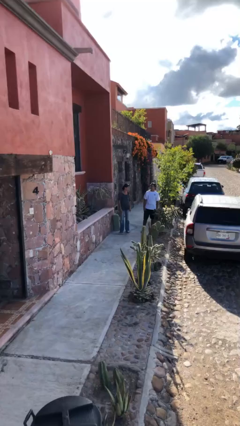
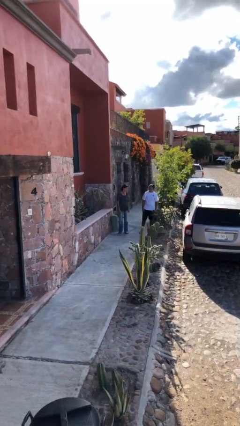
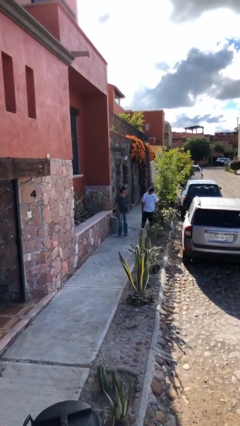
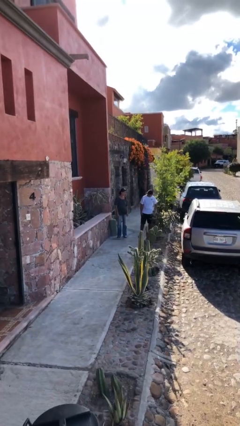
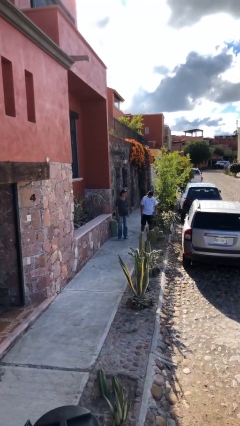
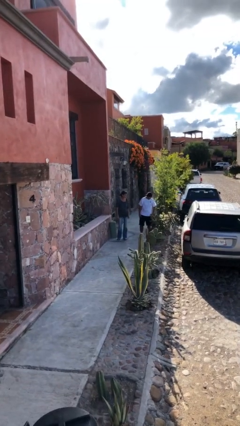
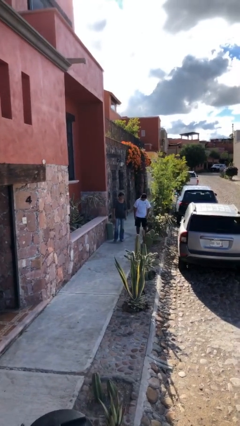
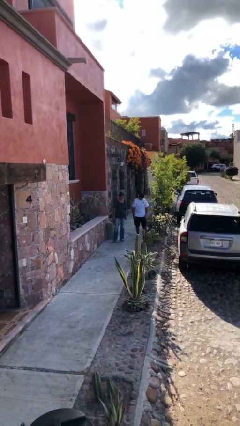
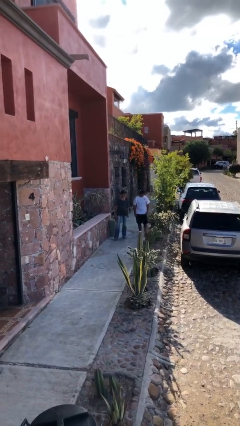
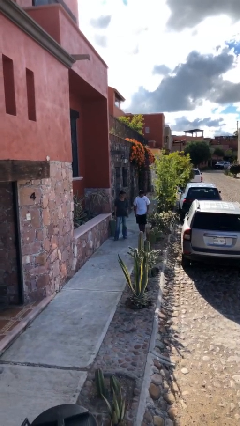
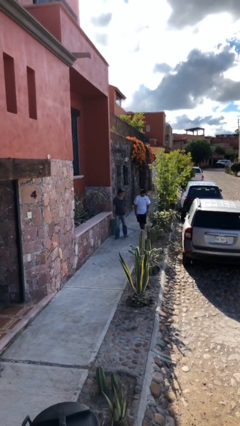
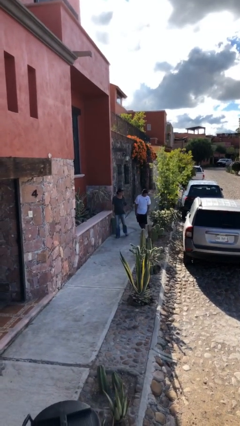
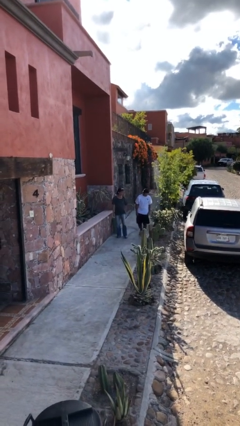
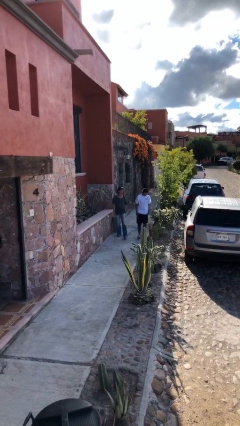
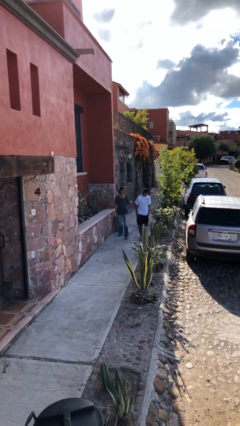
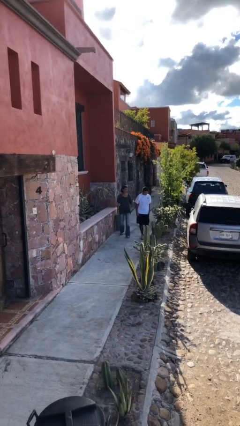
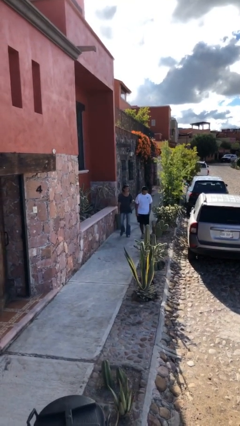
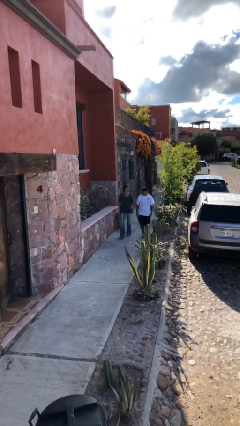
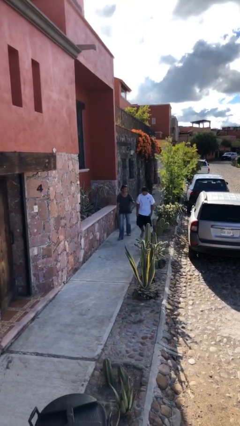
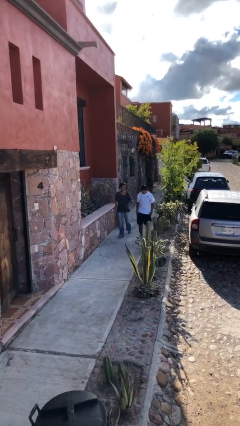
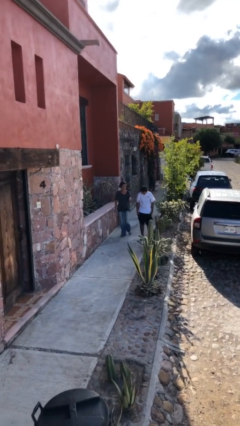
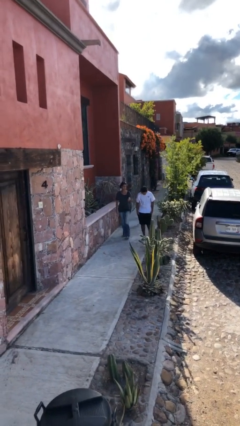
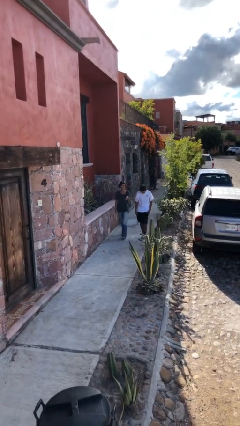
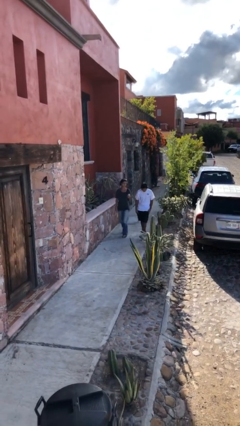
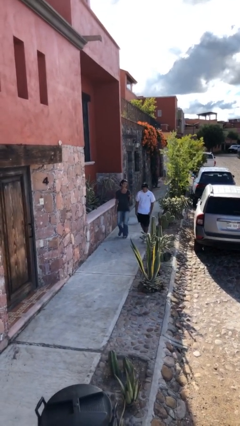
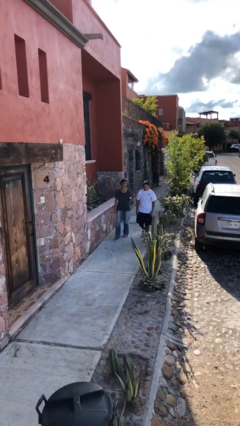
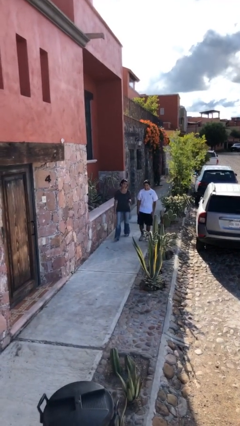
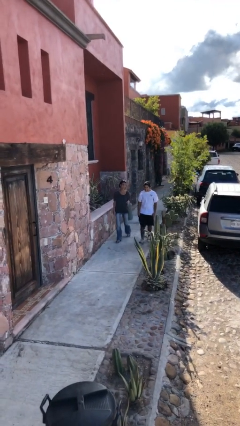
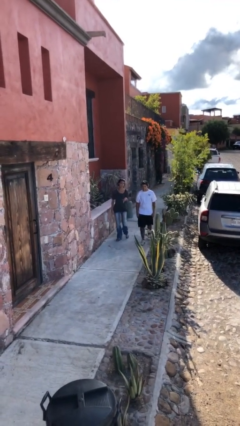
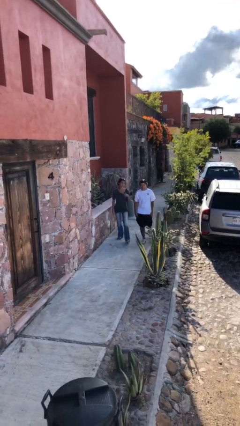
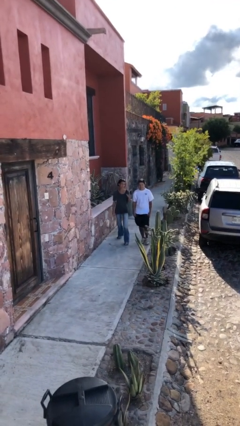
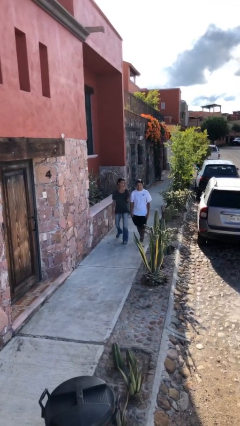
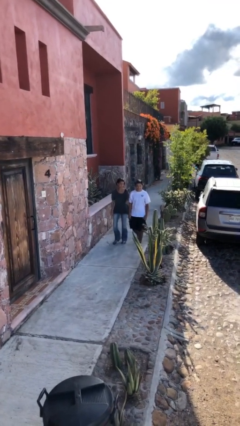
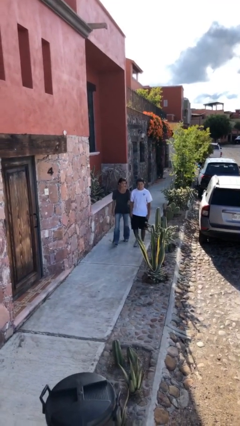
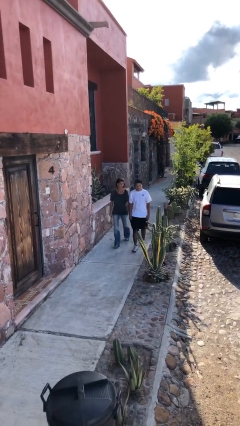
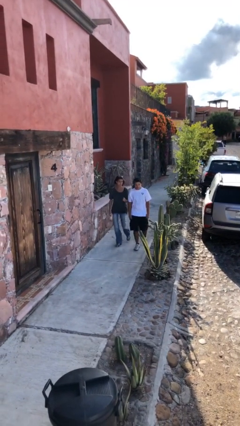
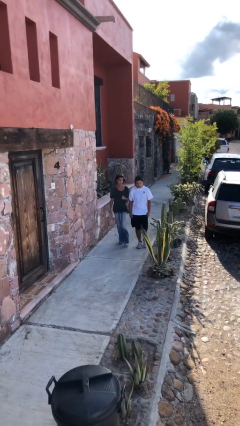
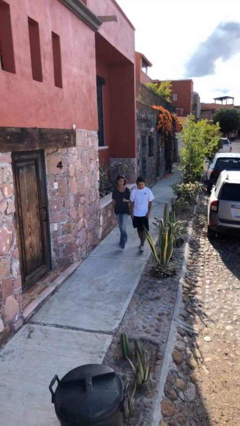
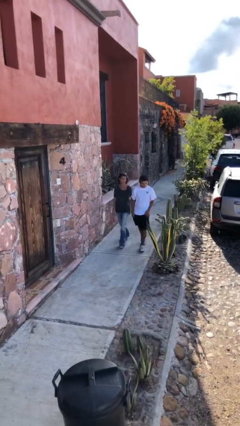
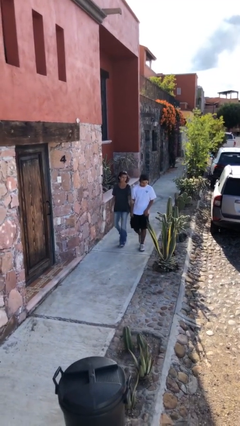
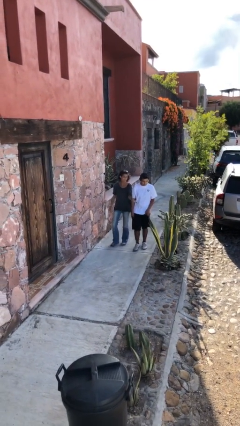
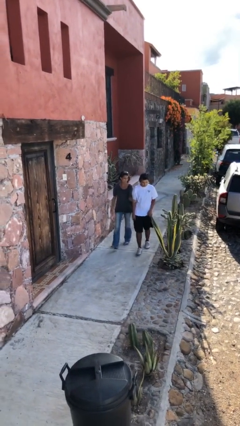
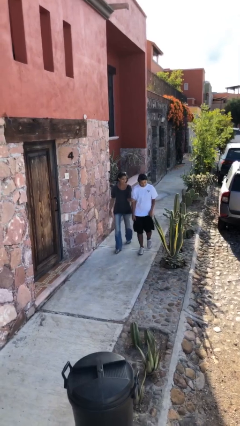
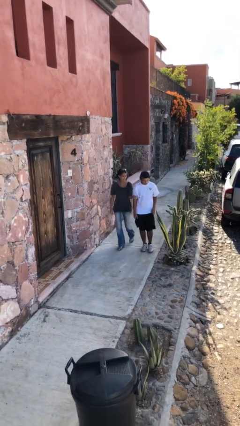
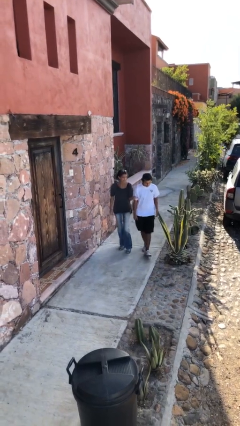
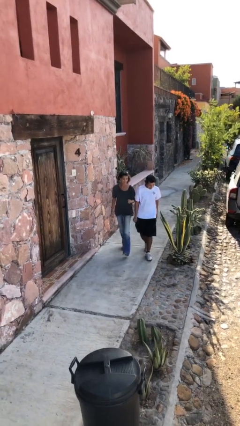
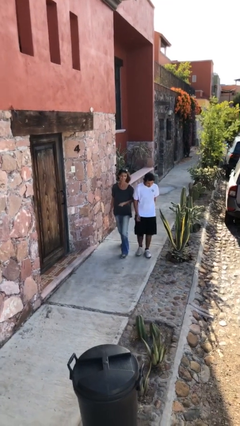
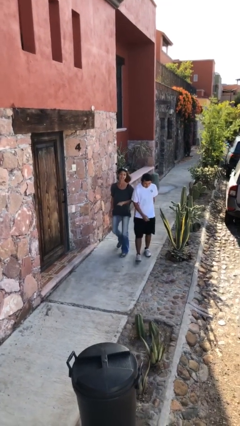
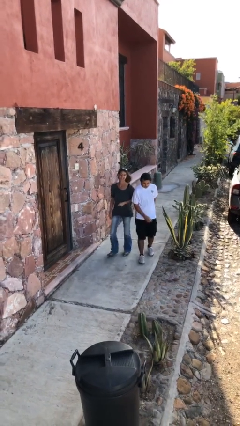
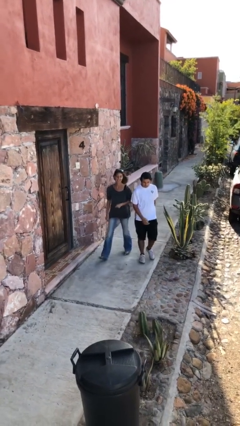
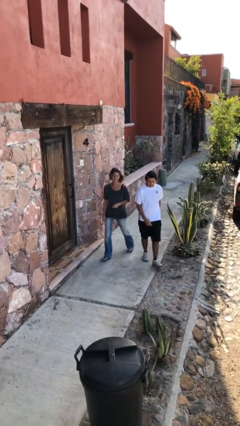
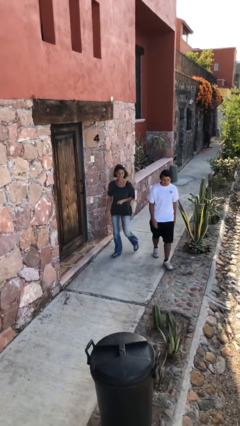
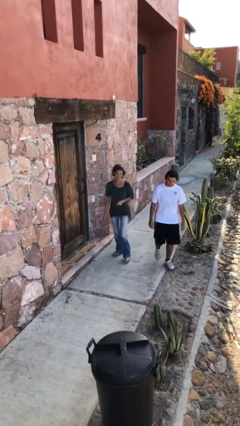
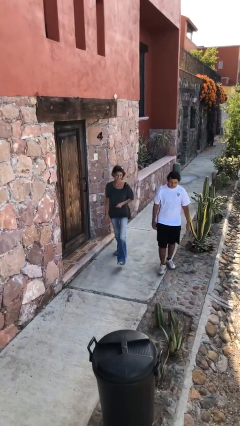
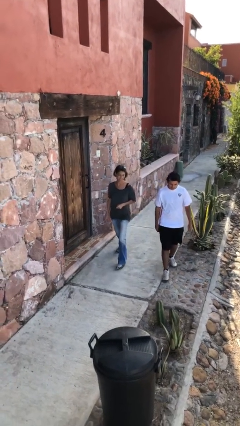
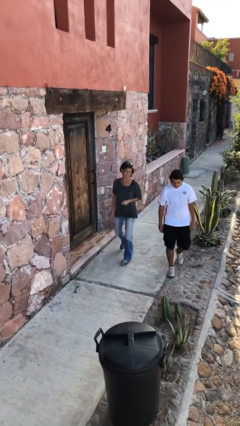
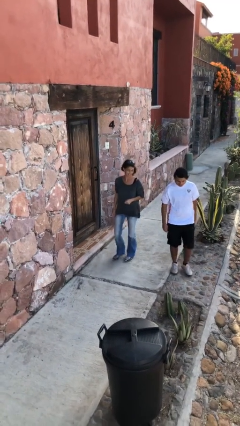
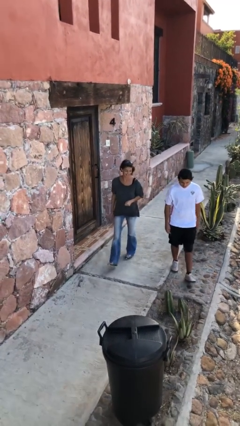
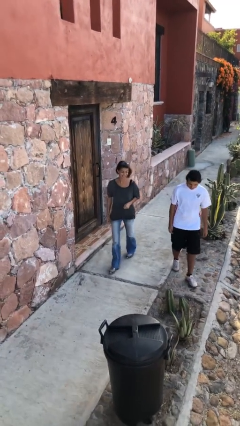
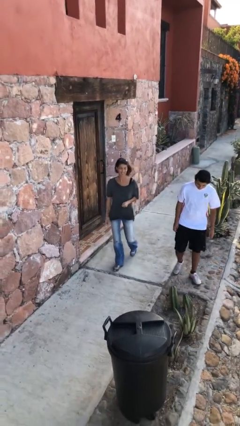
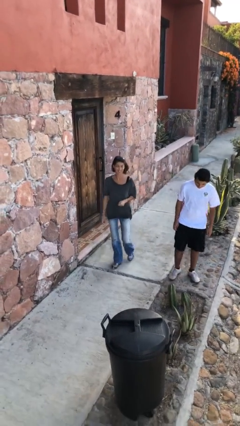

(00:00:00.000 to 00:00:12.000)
person talks to person

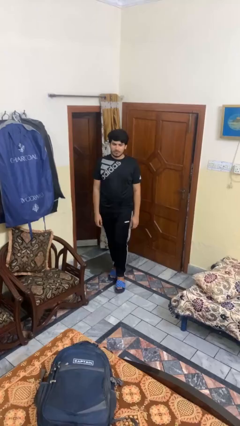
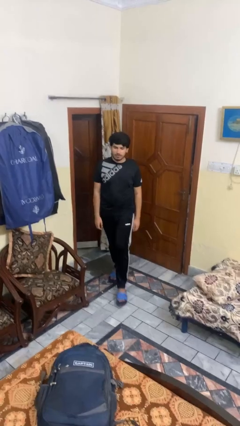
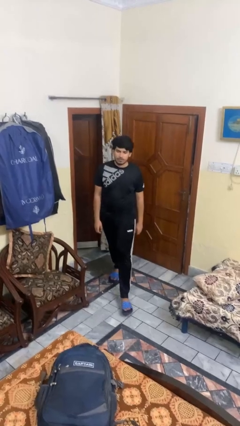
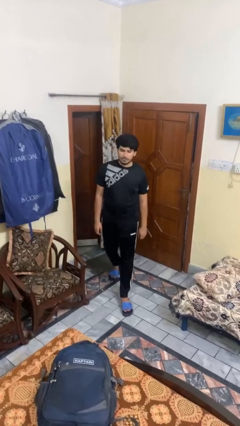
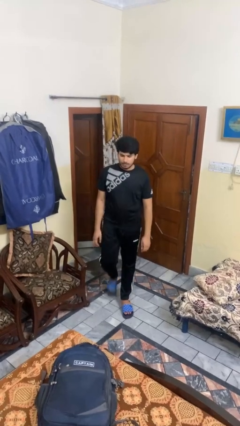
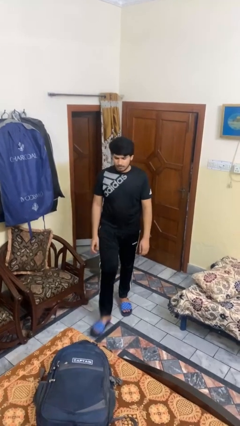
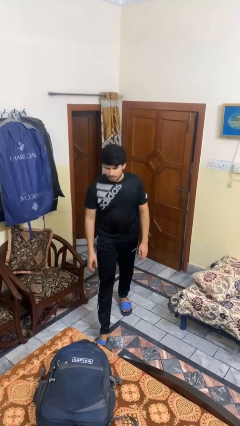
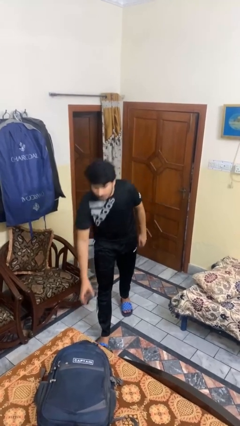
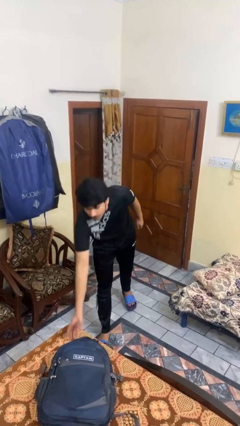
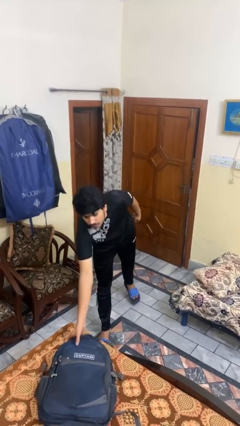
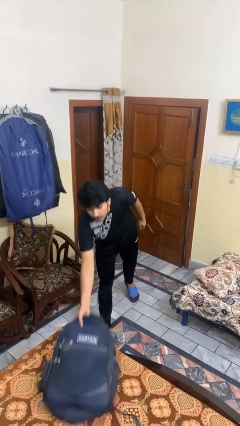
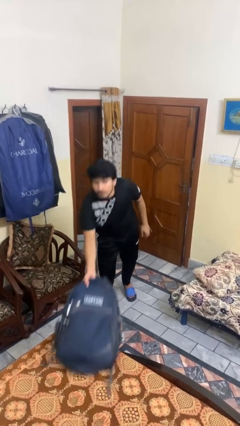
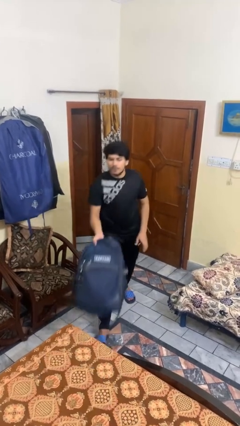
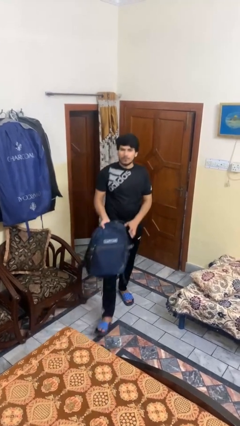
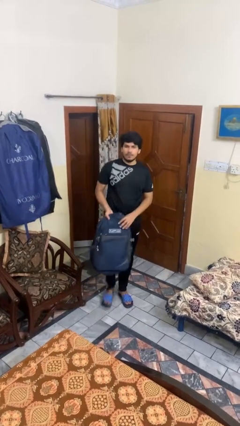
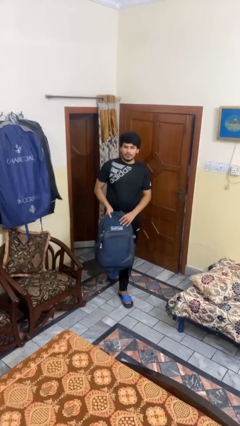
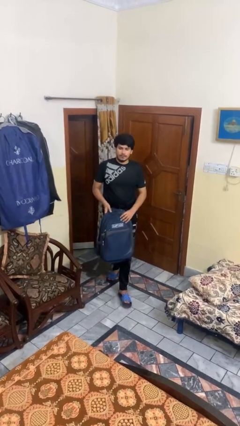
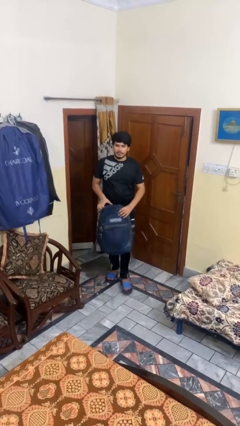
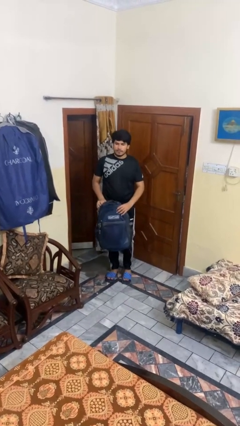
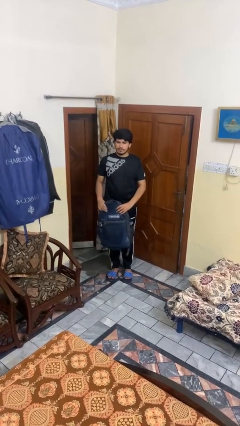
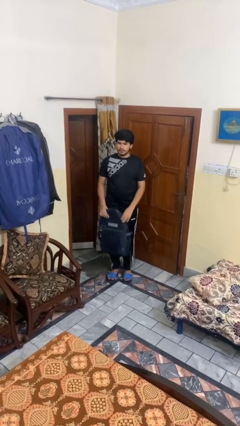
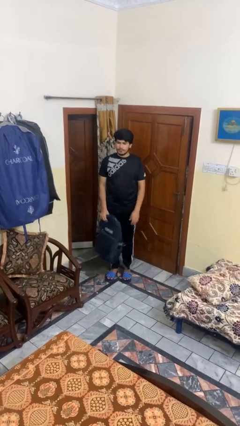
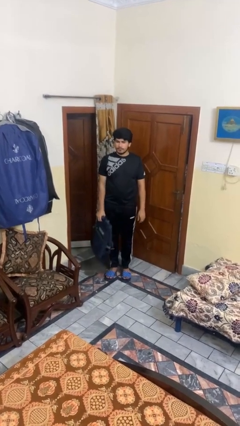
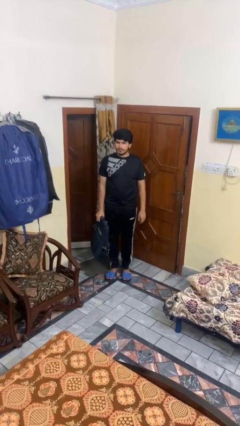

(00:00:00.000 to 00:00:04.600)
person picks up object from bed

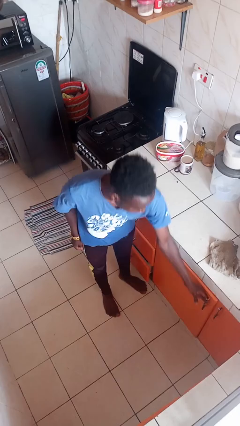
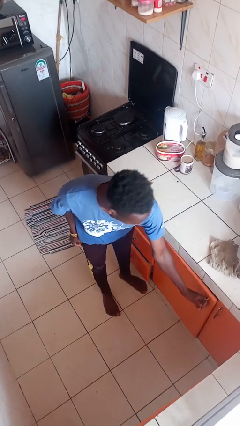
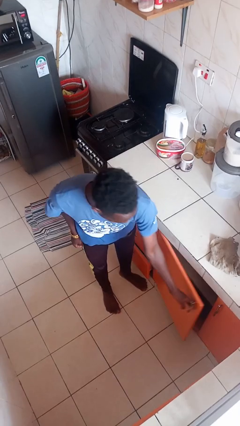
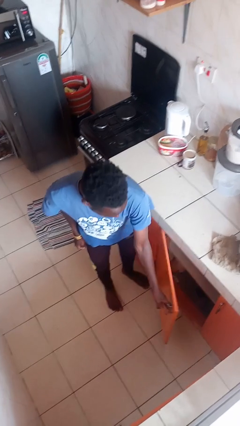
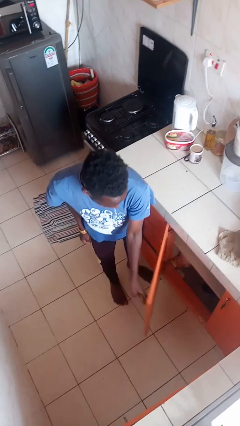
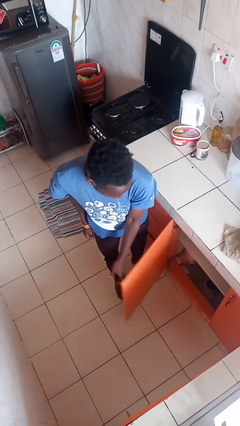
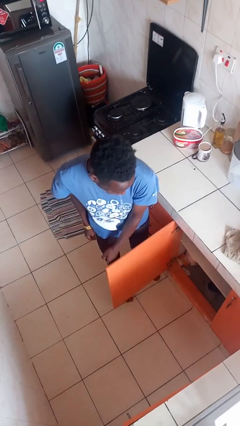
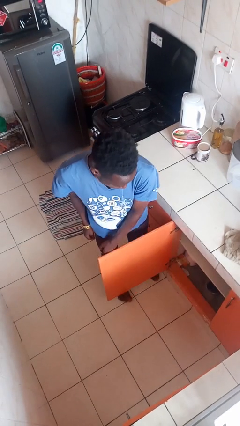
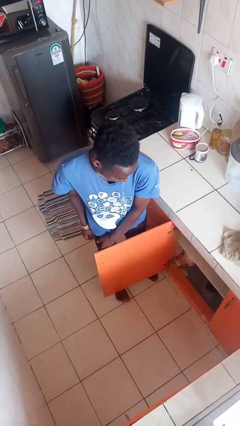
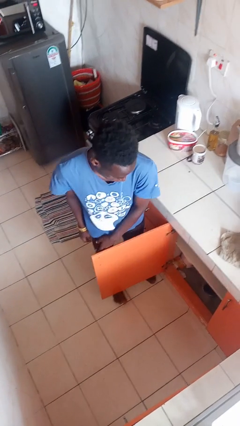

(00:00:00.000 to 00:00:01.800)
person opens cabinet
